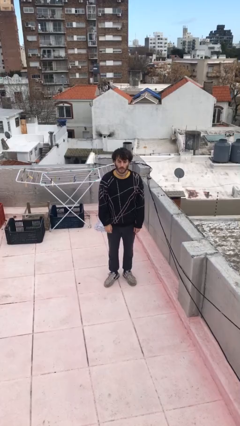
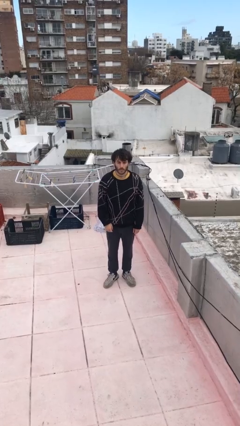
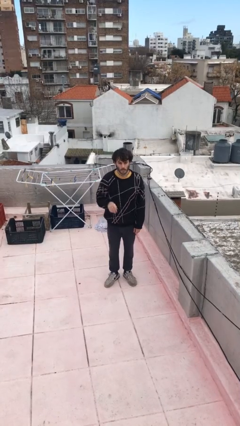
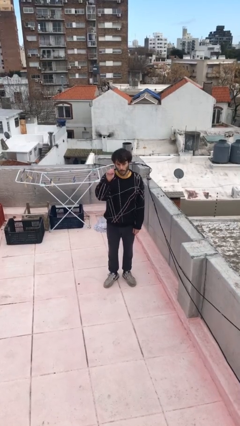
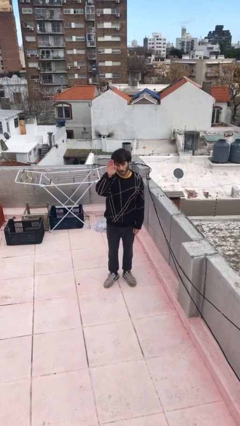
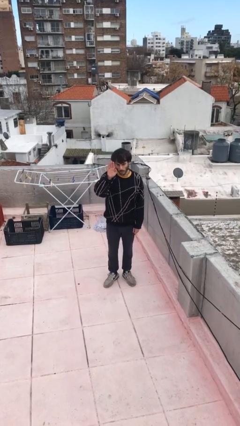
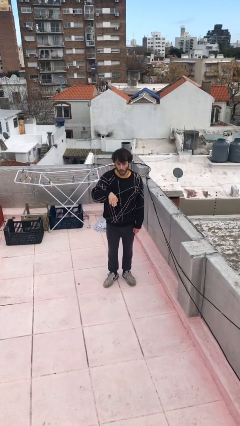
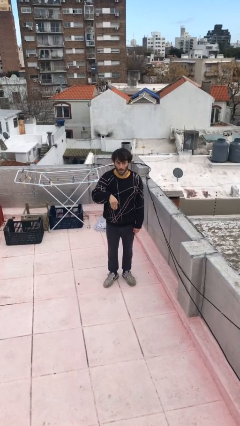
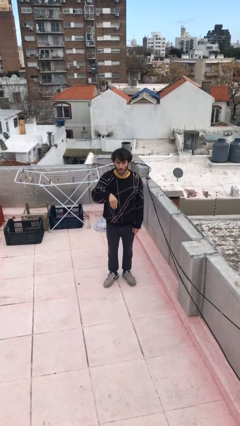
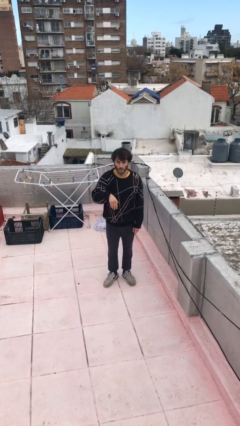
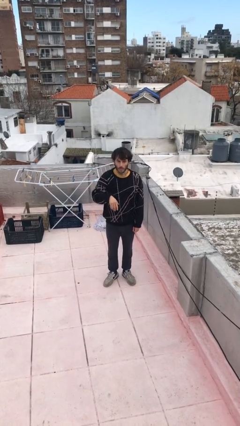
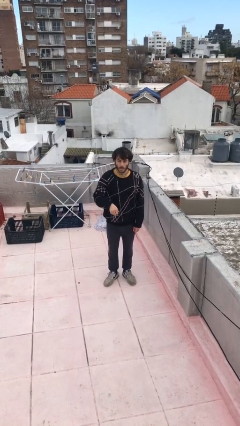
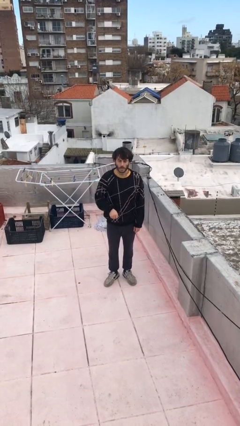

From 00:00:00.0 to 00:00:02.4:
person gestures swipe down

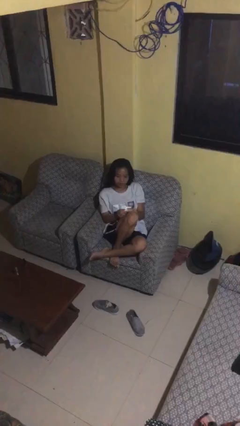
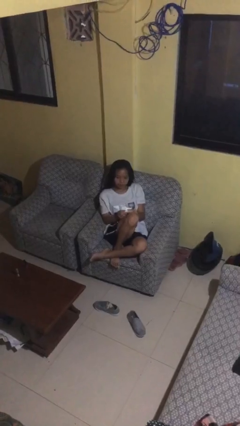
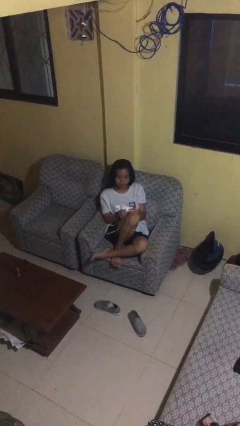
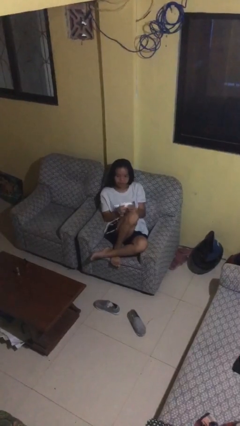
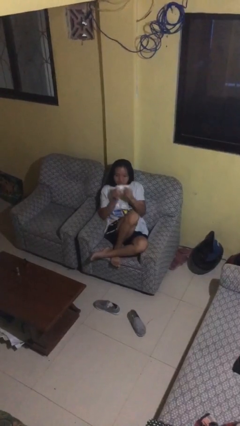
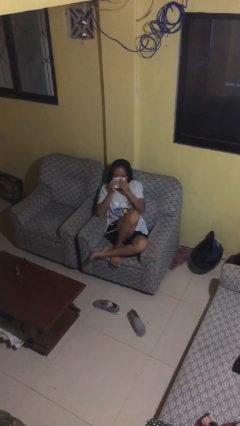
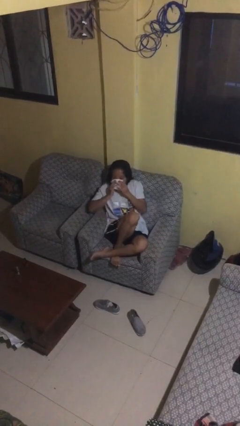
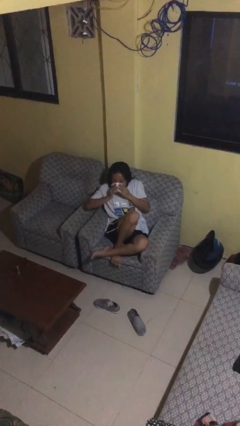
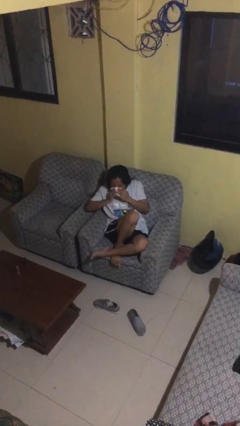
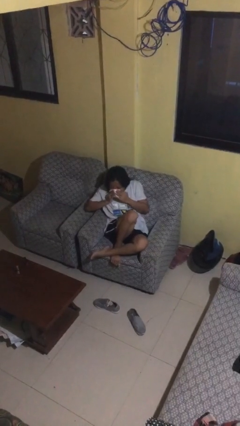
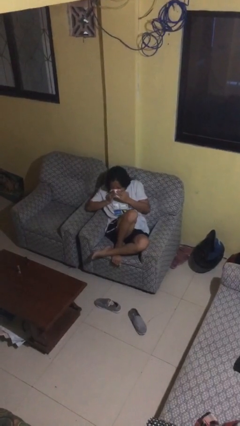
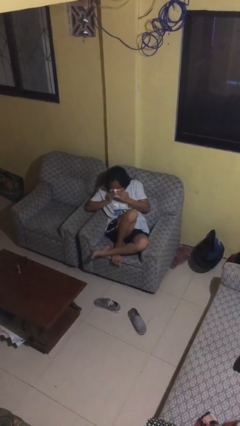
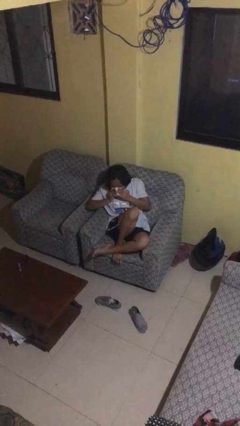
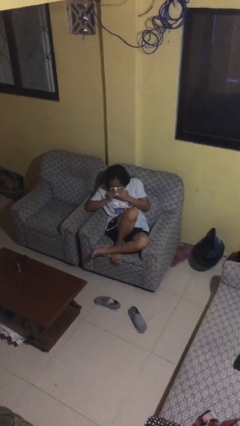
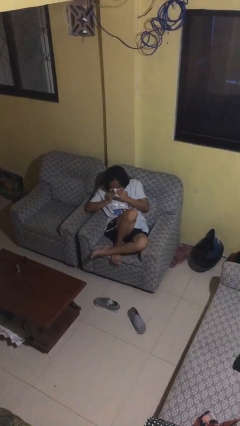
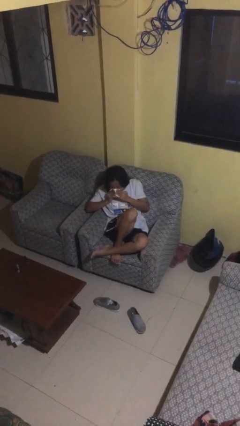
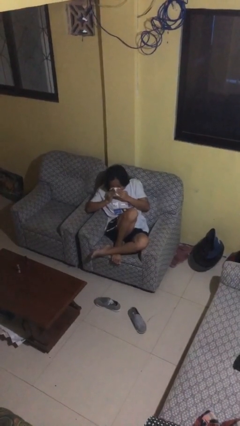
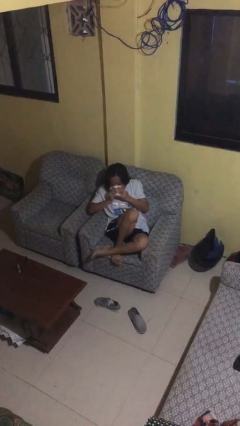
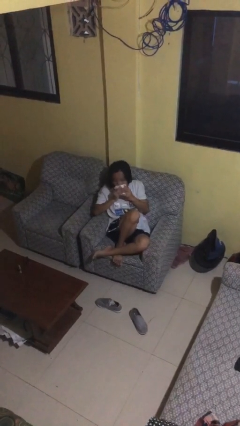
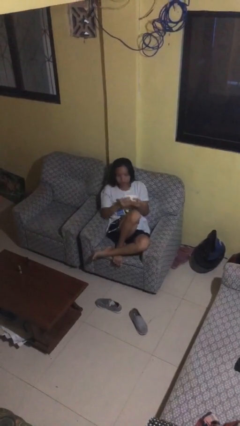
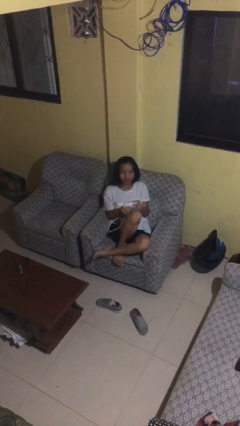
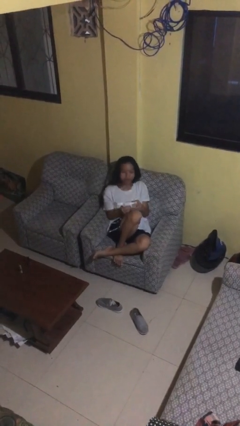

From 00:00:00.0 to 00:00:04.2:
person blows nose

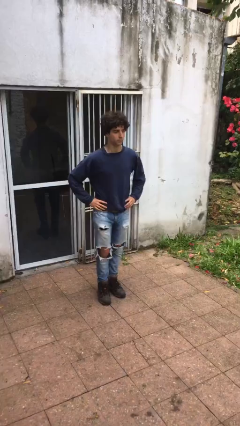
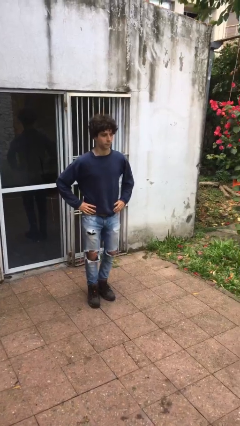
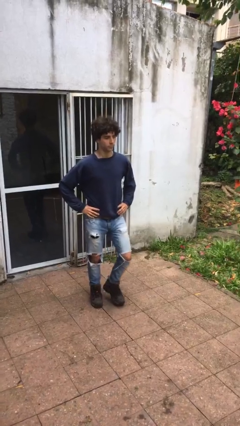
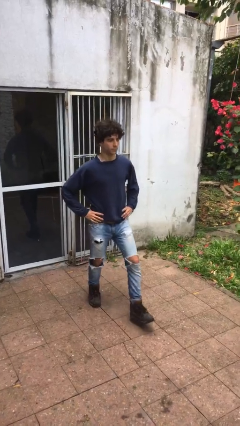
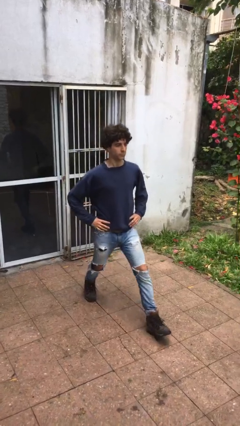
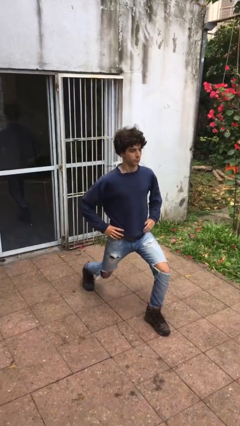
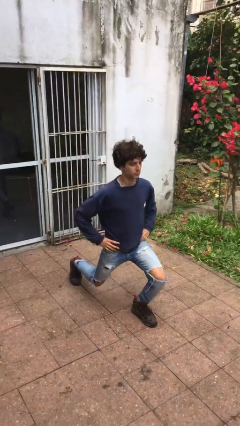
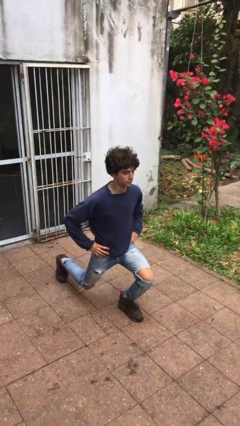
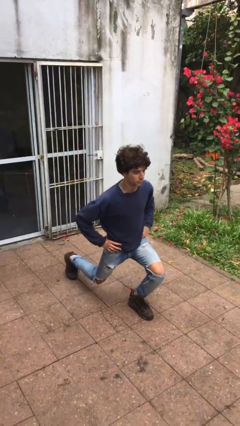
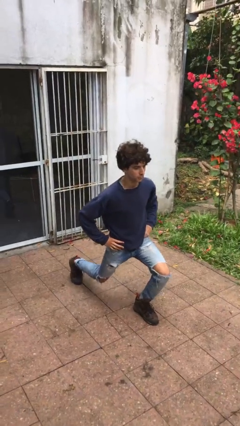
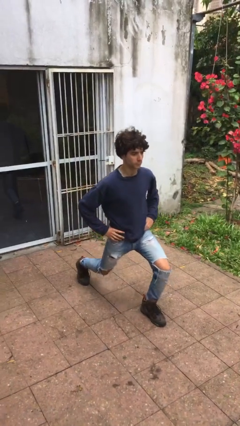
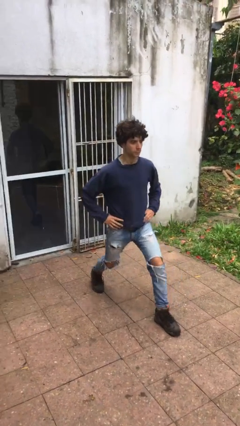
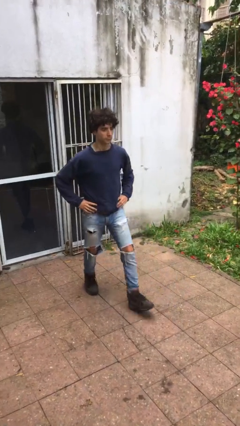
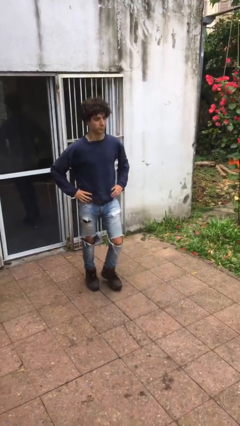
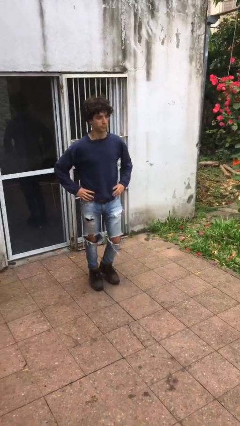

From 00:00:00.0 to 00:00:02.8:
person exercises with lunges

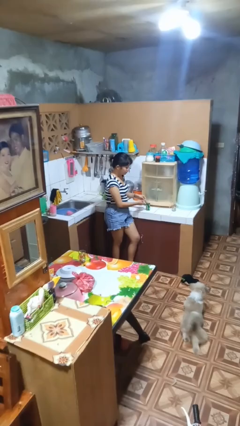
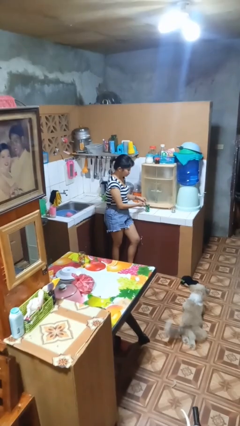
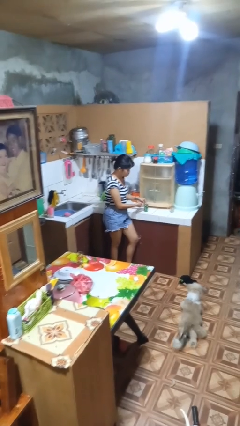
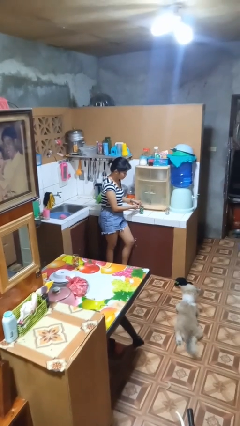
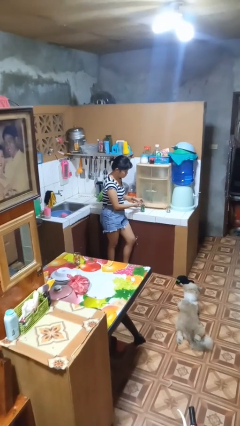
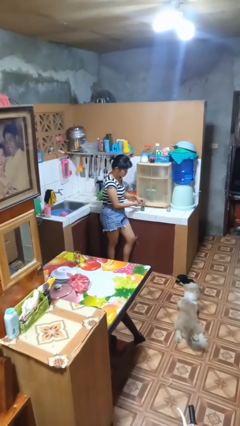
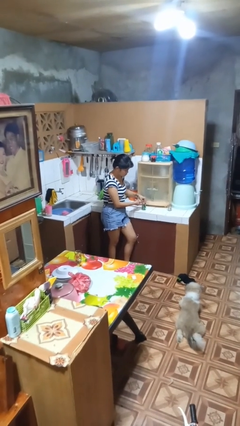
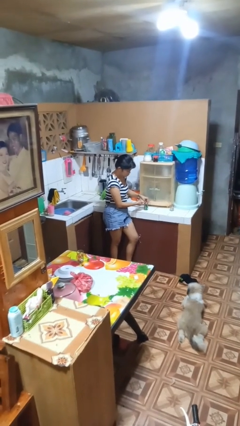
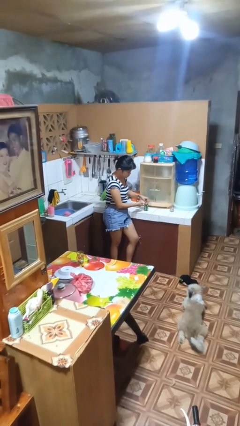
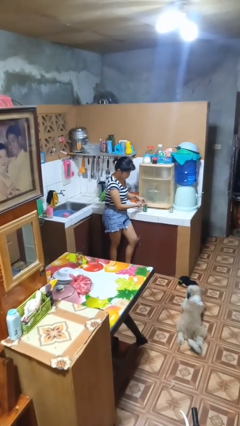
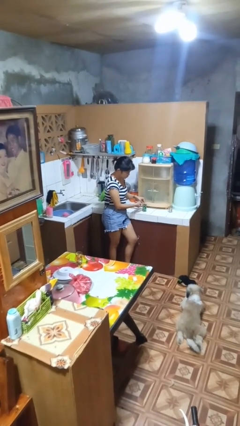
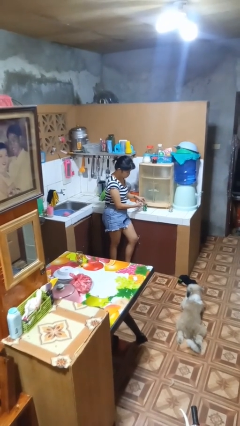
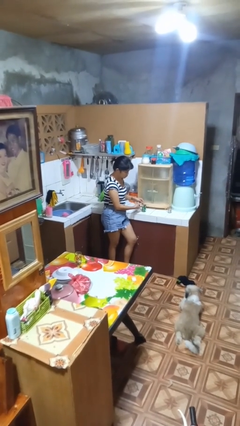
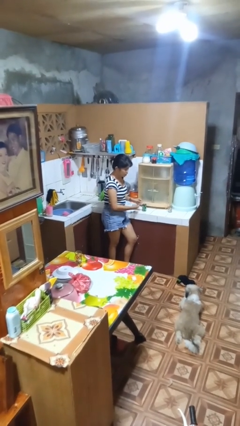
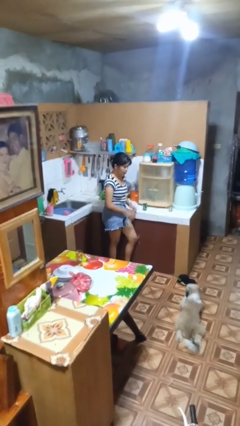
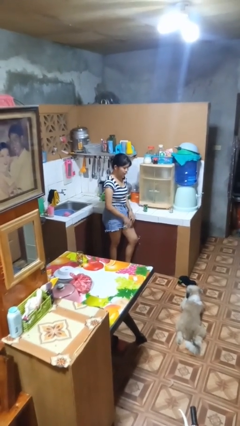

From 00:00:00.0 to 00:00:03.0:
person opens can with can opener

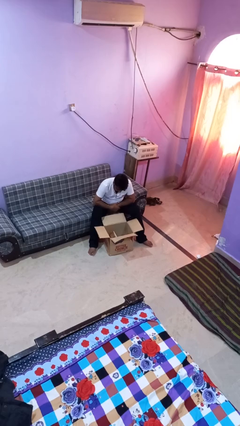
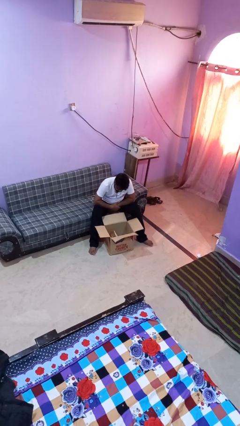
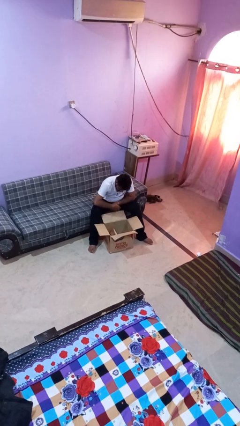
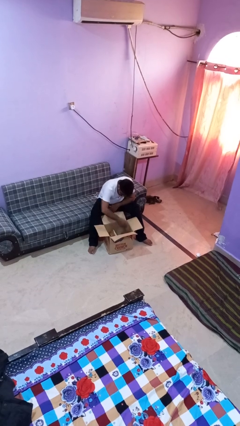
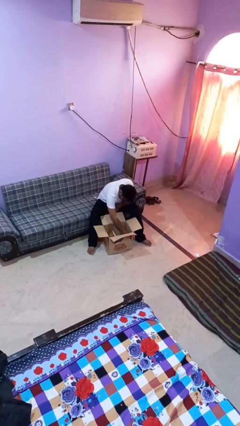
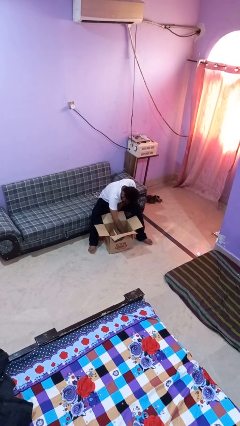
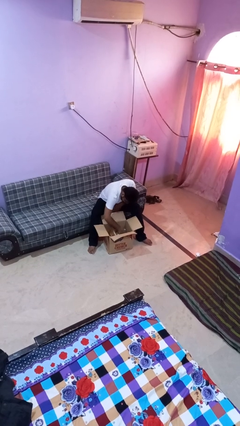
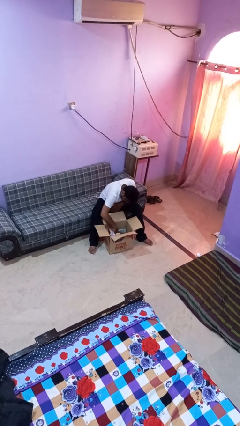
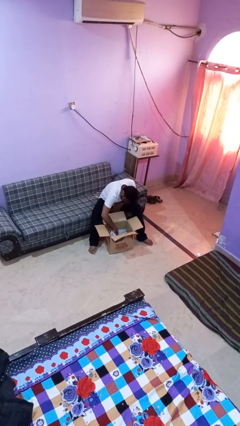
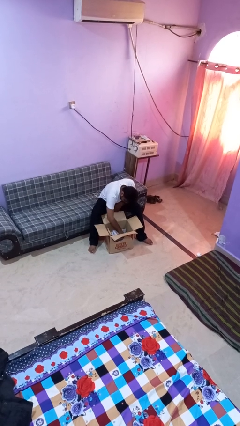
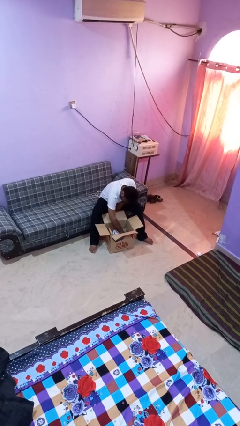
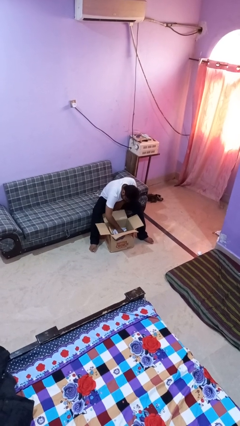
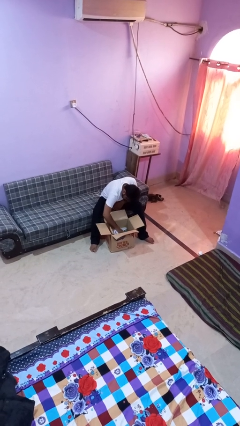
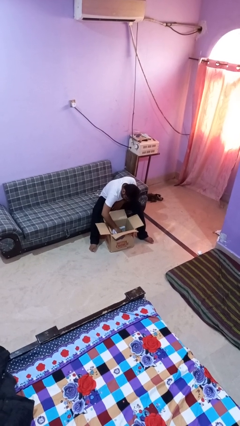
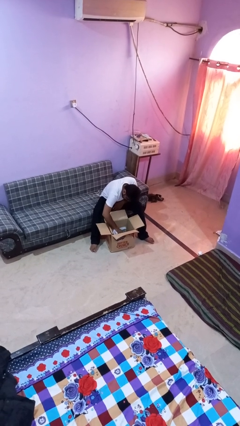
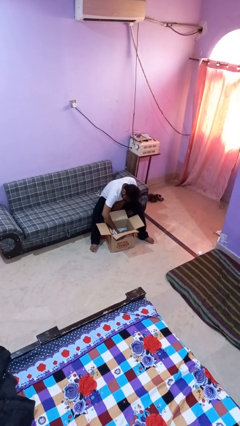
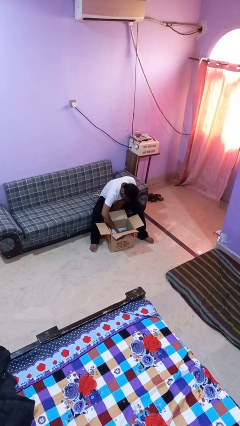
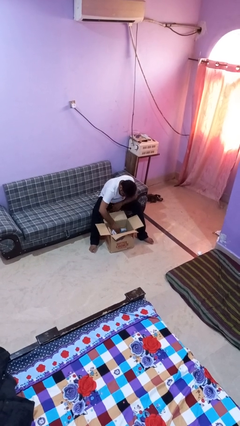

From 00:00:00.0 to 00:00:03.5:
person searches in box

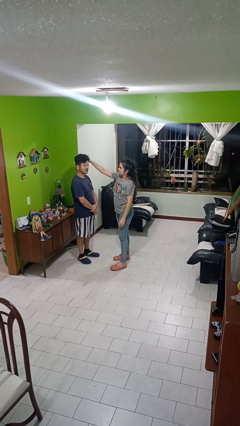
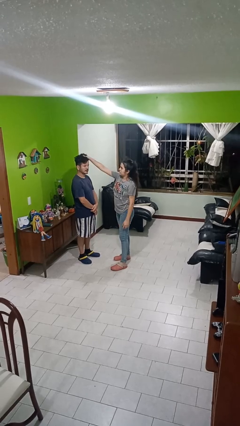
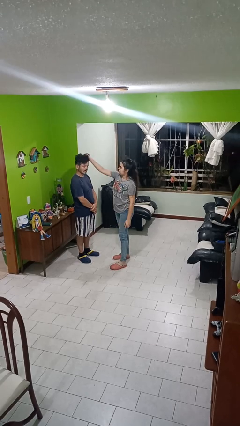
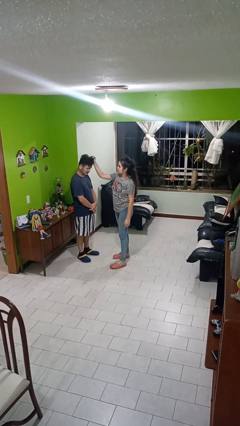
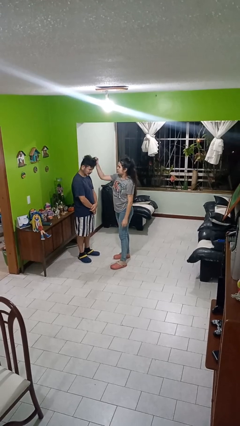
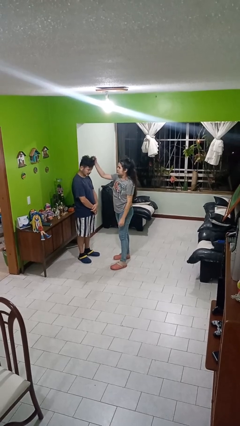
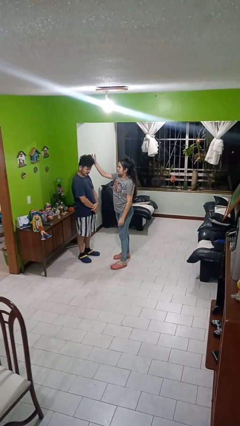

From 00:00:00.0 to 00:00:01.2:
person grabs person by hair

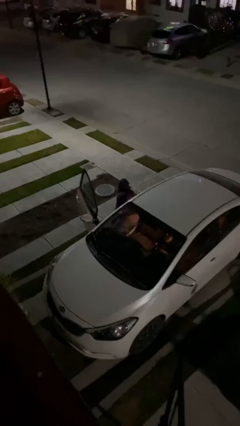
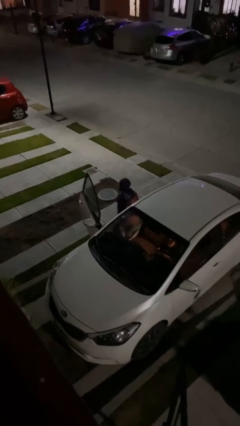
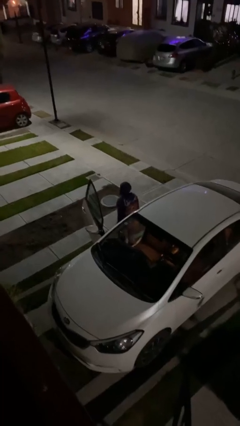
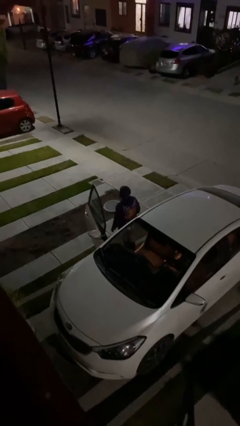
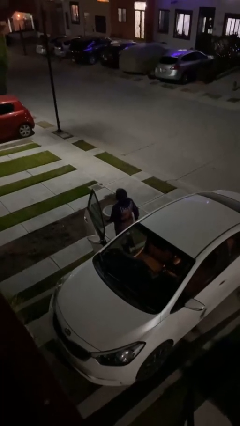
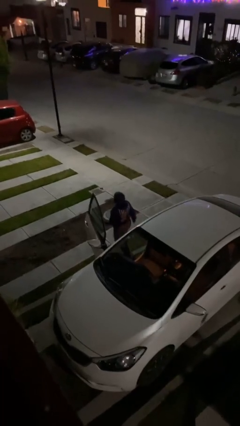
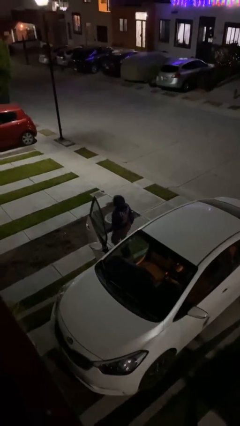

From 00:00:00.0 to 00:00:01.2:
person exits car
